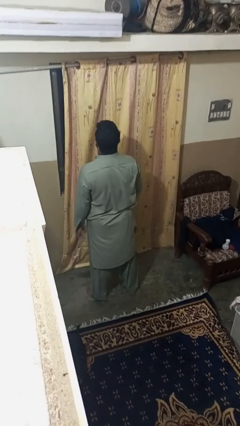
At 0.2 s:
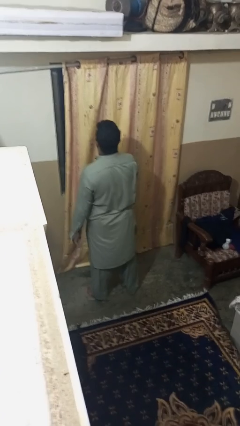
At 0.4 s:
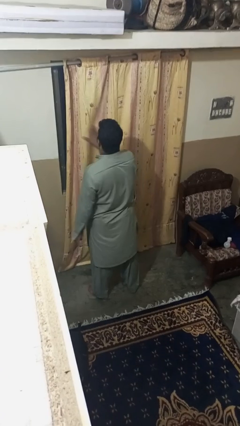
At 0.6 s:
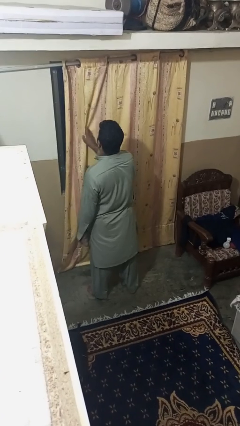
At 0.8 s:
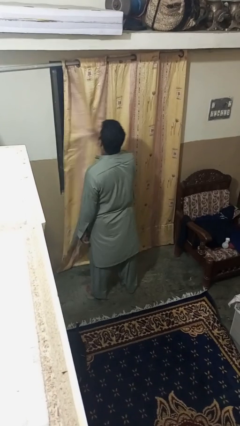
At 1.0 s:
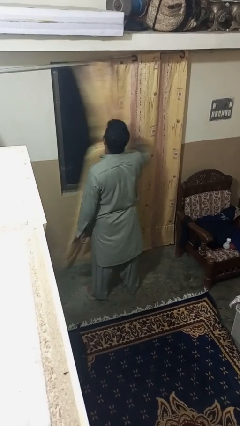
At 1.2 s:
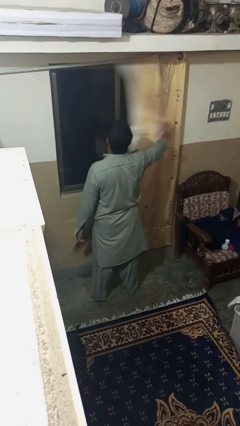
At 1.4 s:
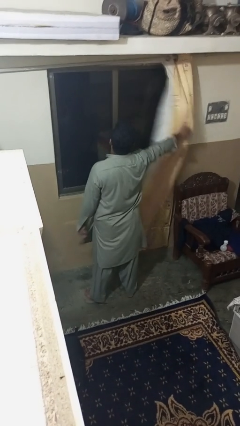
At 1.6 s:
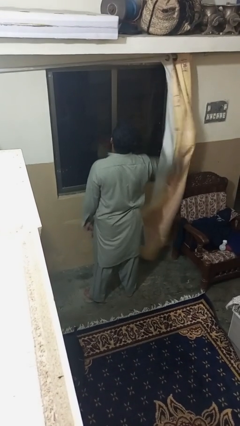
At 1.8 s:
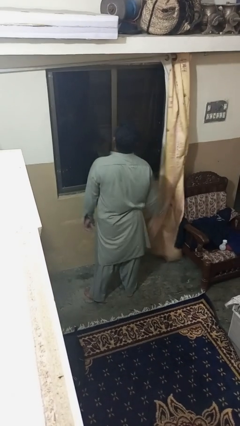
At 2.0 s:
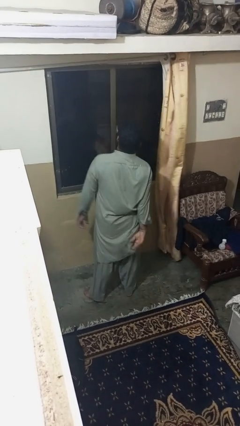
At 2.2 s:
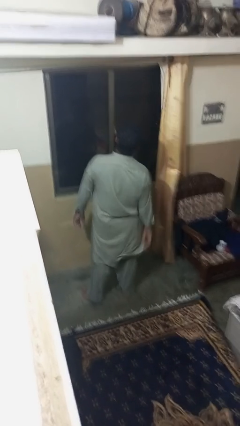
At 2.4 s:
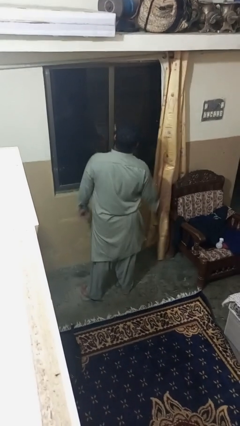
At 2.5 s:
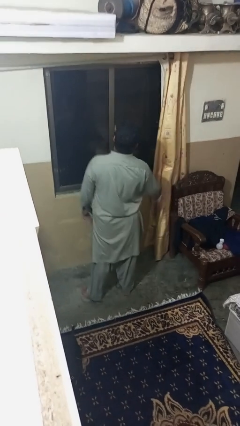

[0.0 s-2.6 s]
person opens curtains

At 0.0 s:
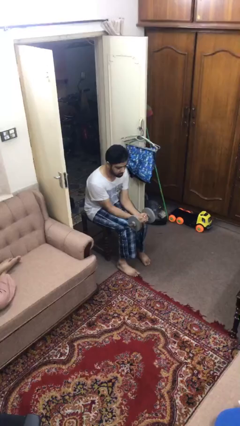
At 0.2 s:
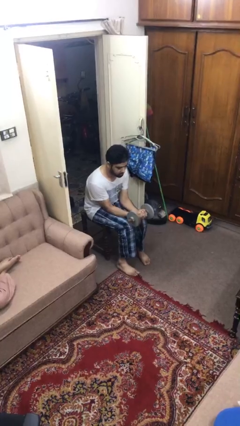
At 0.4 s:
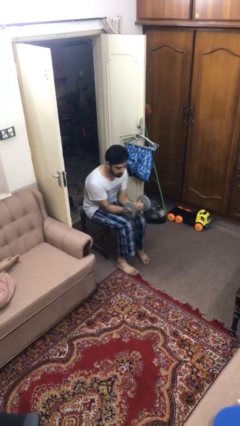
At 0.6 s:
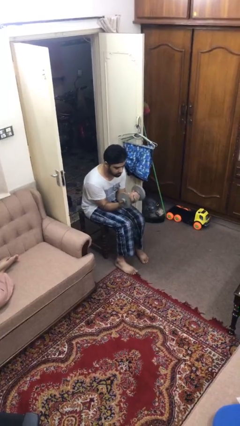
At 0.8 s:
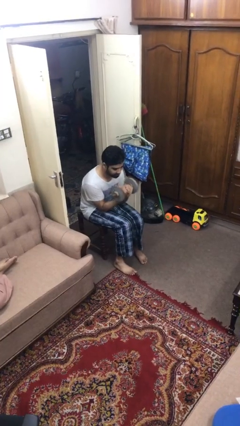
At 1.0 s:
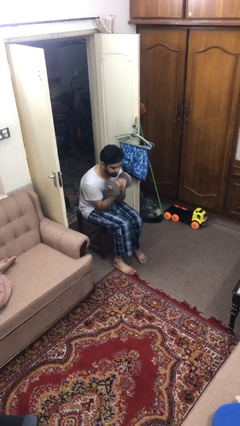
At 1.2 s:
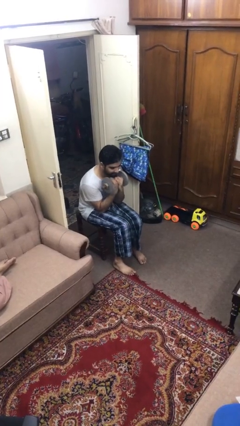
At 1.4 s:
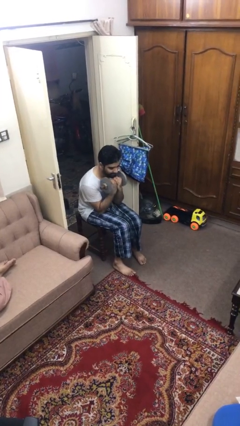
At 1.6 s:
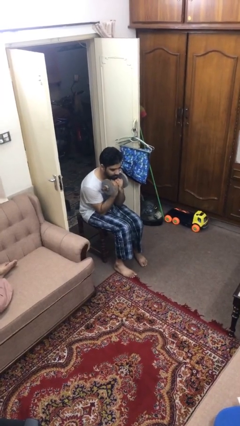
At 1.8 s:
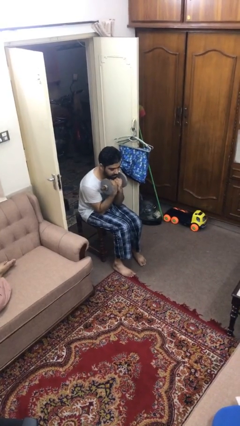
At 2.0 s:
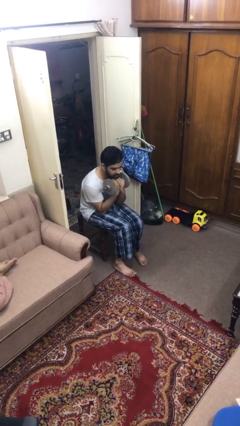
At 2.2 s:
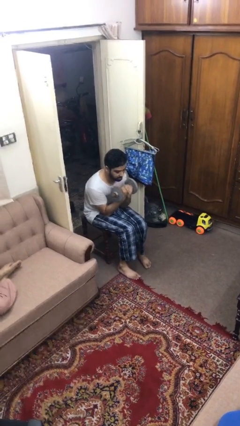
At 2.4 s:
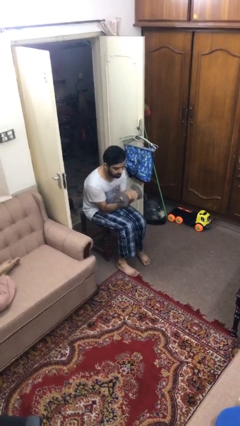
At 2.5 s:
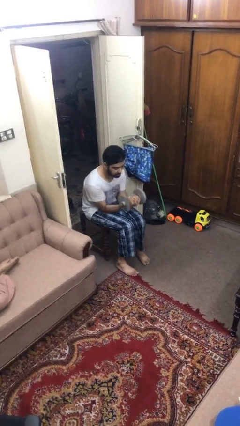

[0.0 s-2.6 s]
person lifts dumbbells

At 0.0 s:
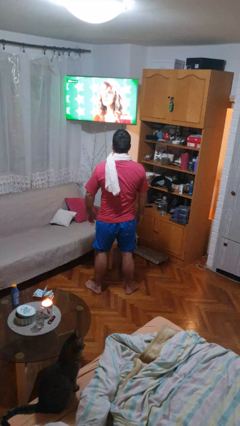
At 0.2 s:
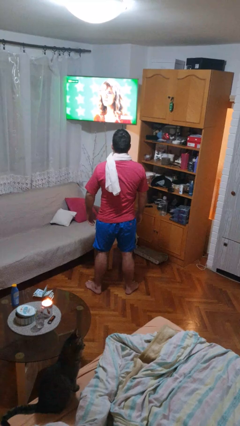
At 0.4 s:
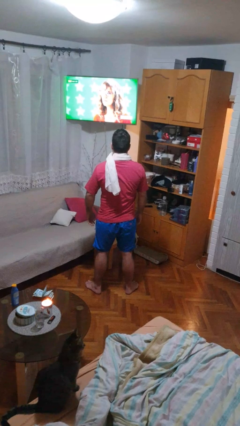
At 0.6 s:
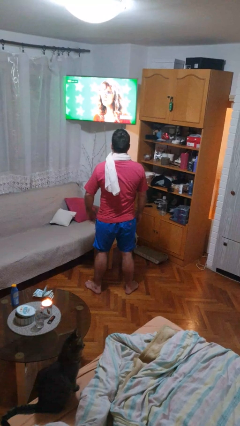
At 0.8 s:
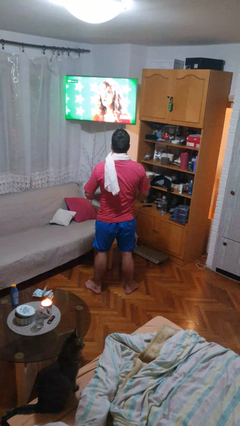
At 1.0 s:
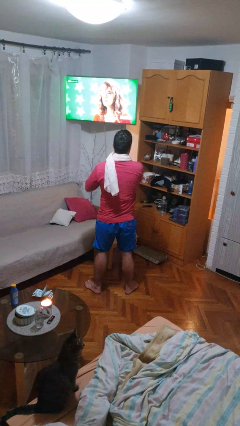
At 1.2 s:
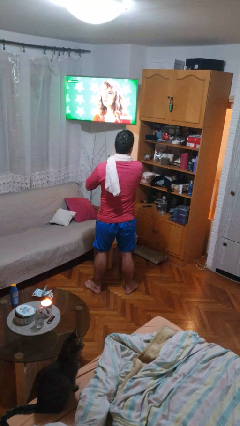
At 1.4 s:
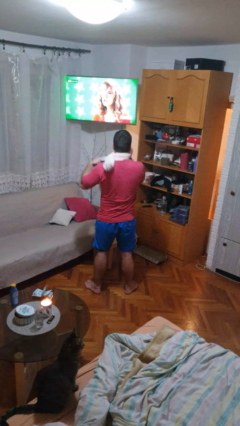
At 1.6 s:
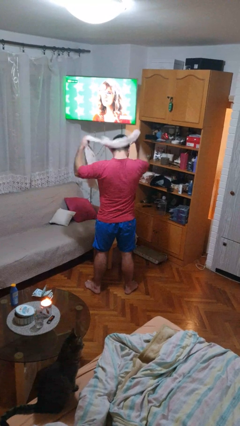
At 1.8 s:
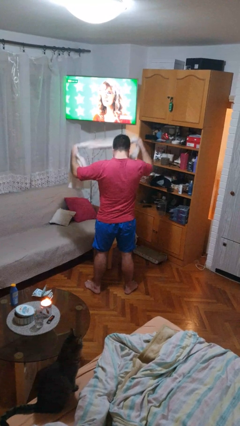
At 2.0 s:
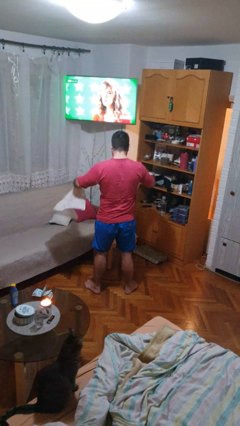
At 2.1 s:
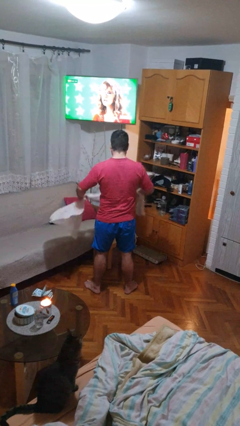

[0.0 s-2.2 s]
person takes off scarf

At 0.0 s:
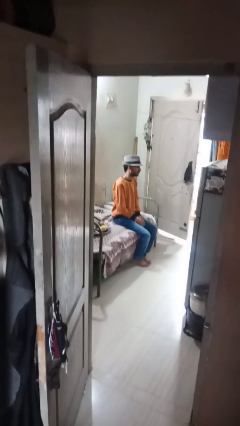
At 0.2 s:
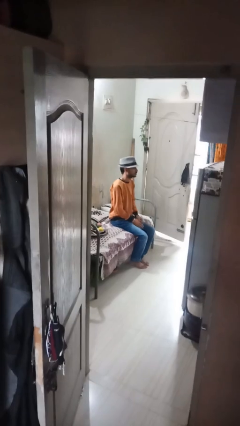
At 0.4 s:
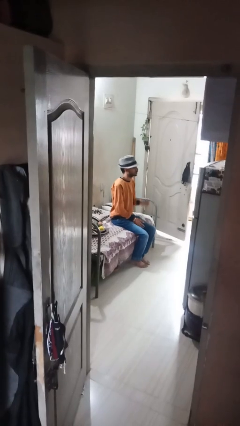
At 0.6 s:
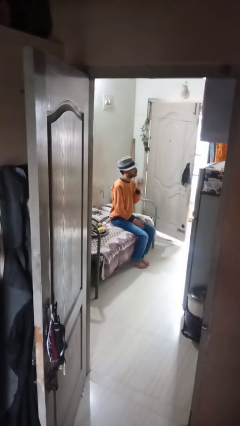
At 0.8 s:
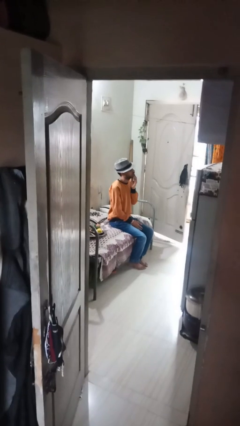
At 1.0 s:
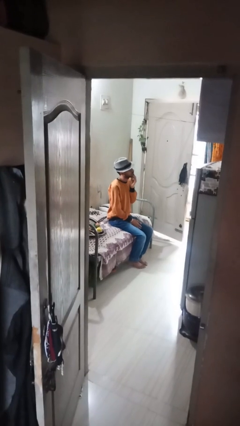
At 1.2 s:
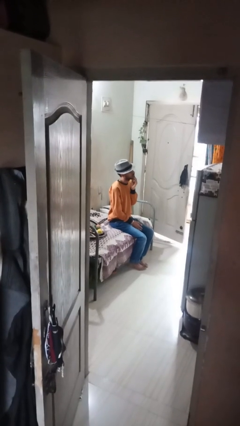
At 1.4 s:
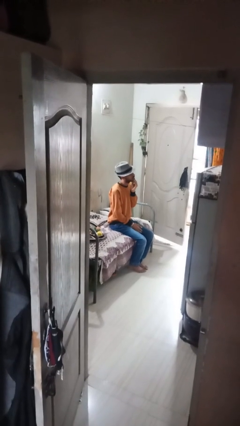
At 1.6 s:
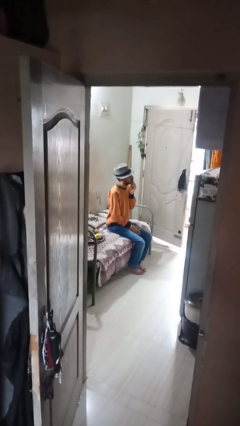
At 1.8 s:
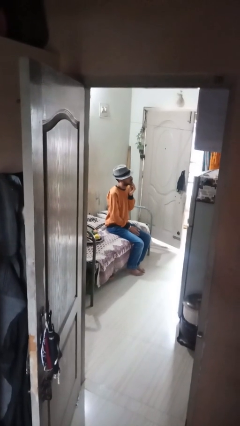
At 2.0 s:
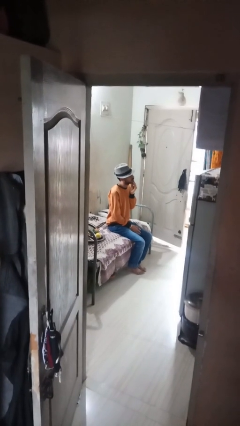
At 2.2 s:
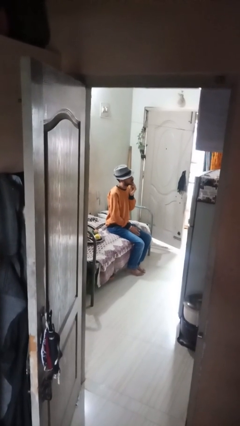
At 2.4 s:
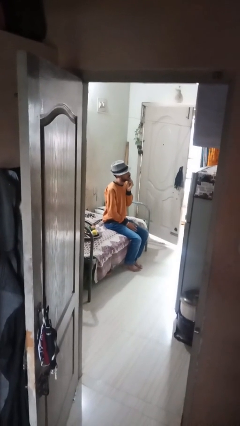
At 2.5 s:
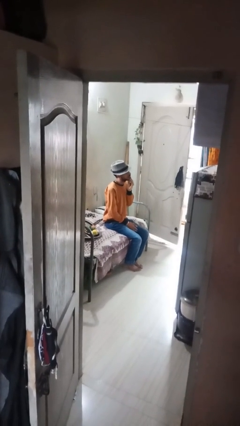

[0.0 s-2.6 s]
person strokes chin

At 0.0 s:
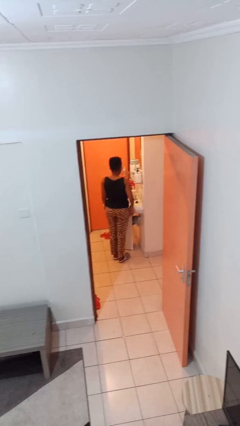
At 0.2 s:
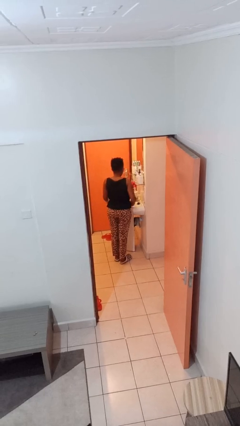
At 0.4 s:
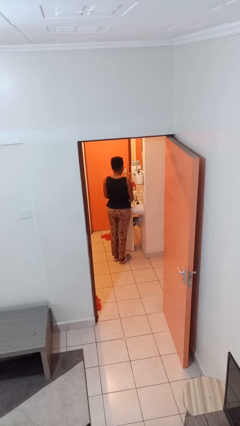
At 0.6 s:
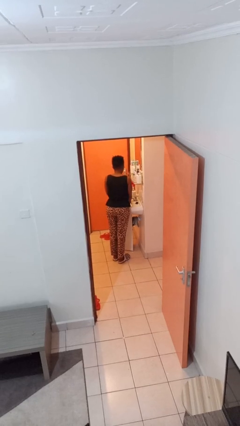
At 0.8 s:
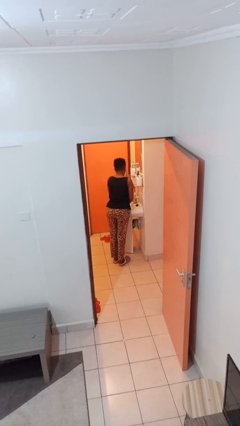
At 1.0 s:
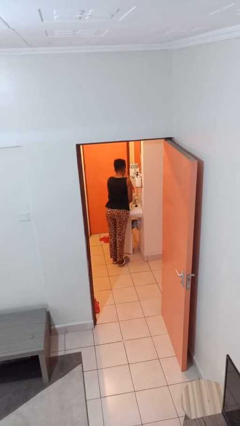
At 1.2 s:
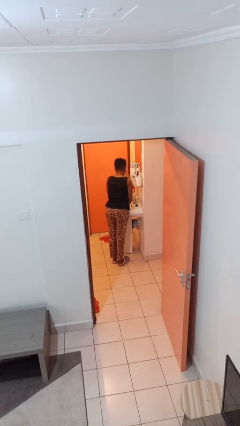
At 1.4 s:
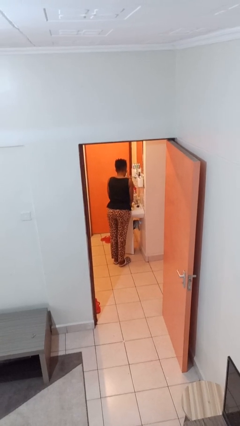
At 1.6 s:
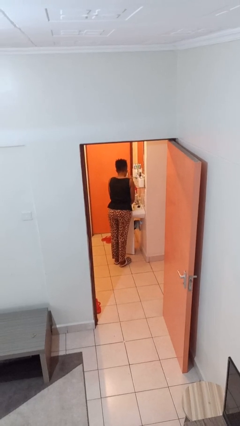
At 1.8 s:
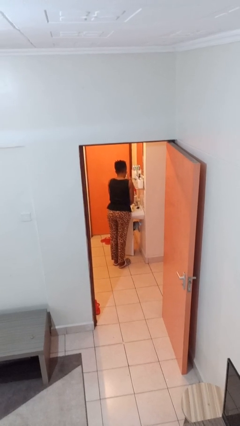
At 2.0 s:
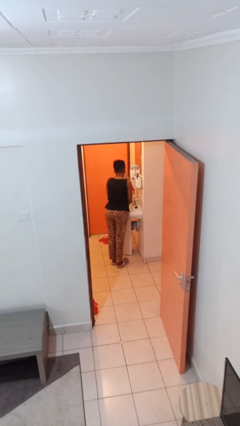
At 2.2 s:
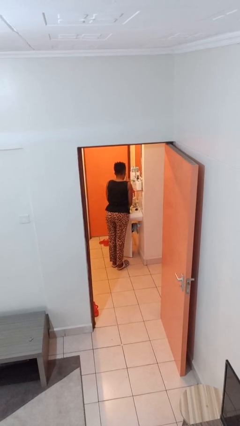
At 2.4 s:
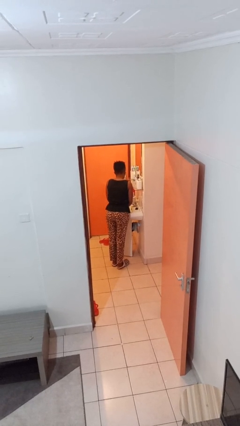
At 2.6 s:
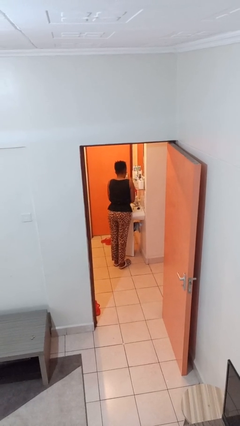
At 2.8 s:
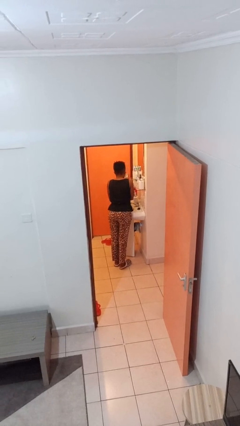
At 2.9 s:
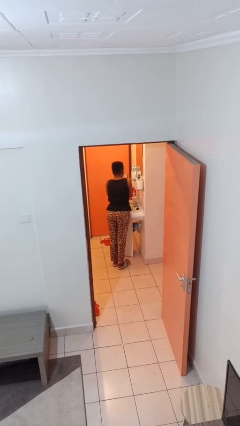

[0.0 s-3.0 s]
person washes hands

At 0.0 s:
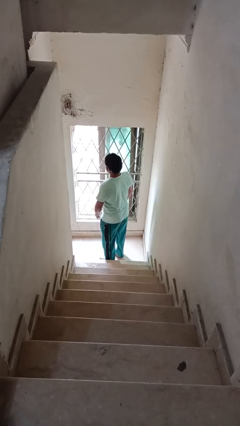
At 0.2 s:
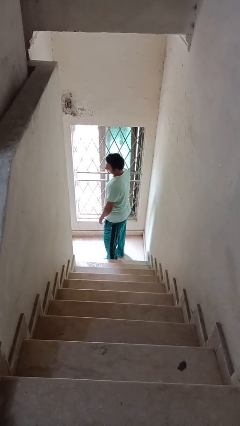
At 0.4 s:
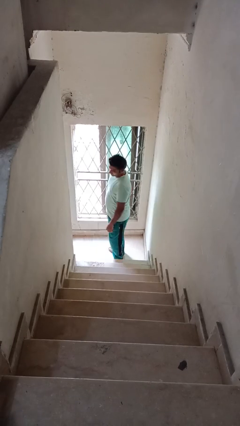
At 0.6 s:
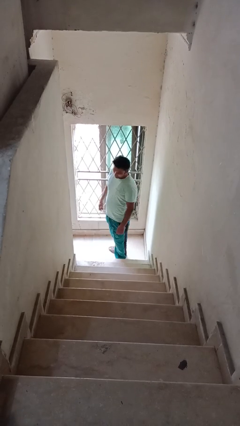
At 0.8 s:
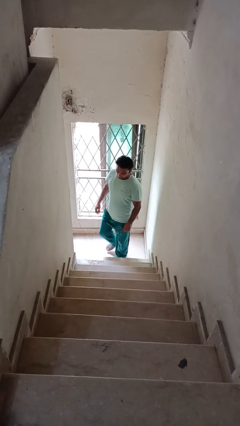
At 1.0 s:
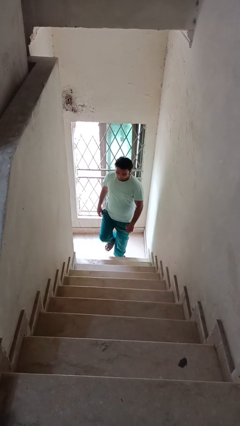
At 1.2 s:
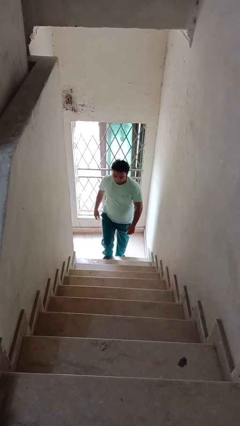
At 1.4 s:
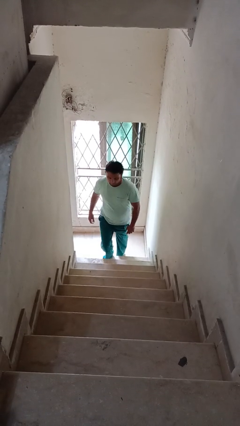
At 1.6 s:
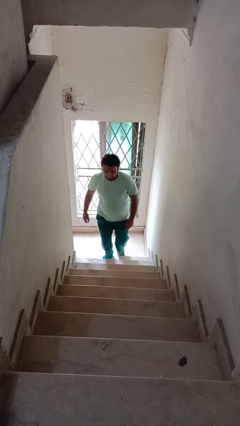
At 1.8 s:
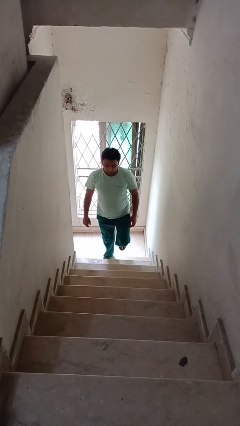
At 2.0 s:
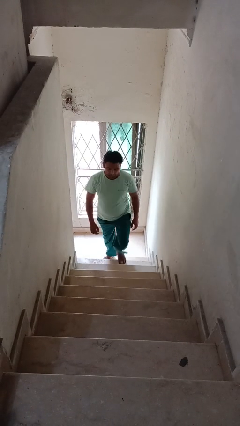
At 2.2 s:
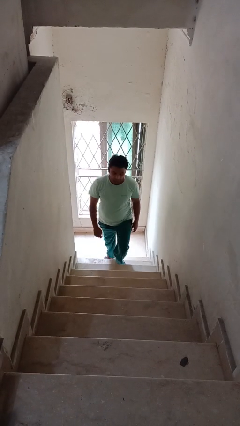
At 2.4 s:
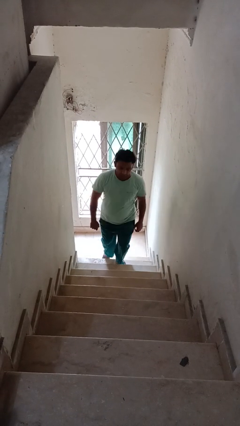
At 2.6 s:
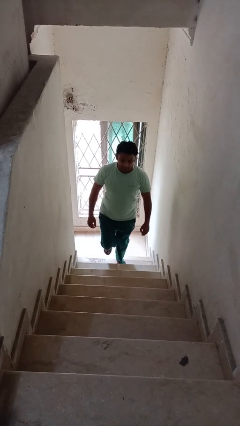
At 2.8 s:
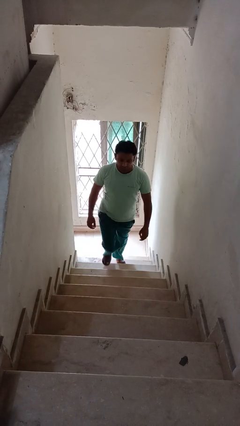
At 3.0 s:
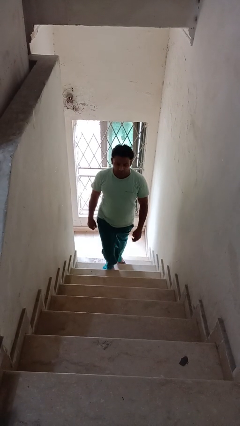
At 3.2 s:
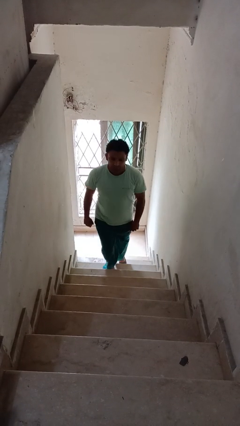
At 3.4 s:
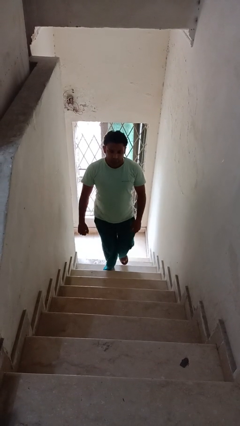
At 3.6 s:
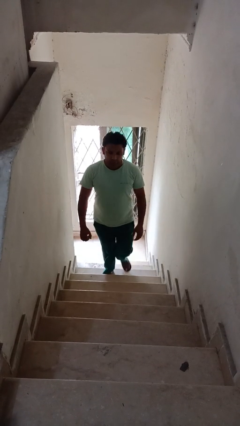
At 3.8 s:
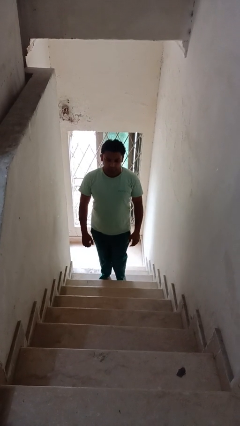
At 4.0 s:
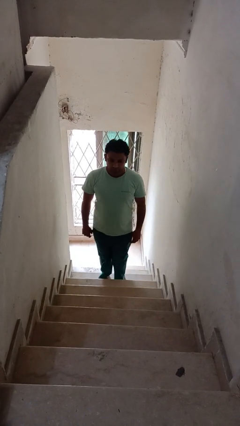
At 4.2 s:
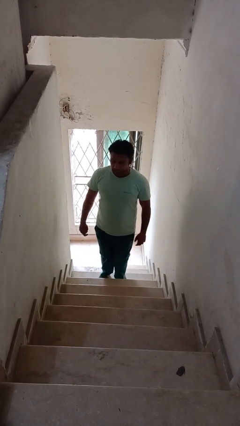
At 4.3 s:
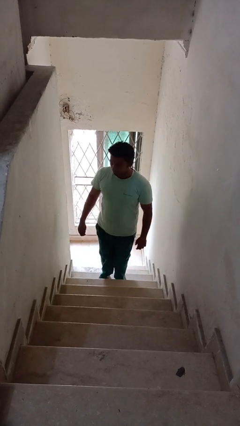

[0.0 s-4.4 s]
person climbs up stairs
